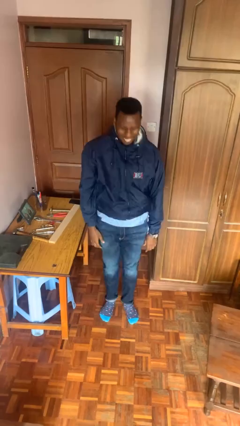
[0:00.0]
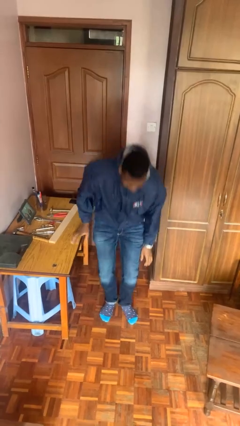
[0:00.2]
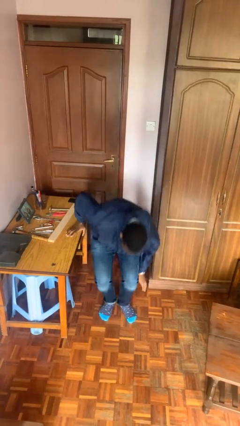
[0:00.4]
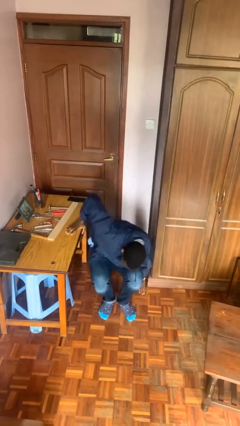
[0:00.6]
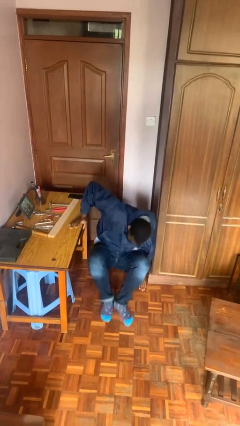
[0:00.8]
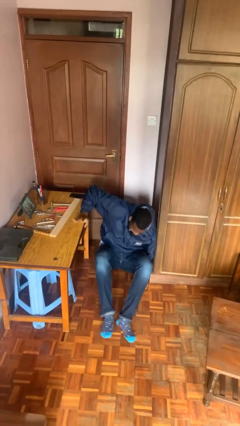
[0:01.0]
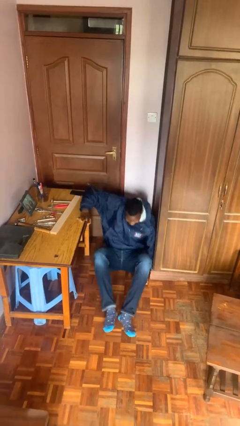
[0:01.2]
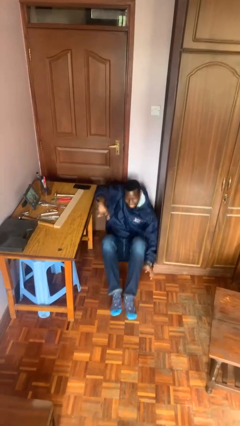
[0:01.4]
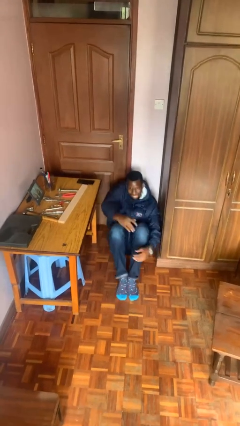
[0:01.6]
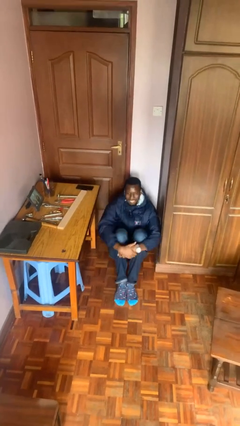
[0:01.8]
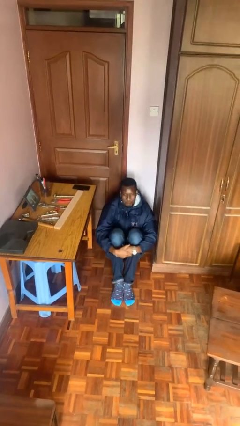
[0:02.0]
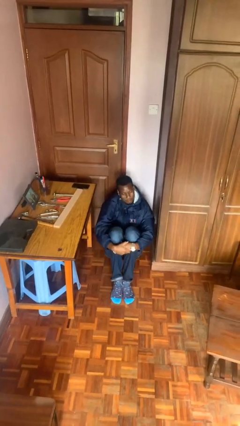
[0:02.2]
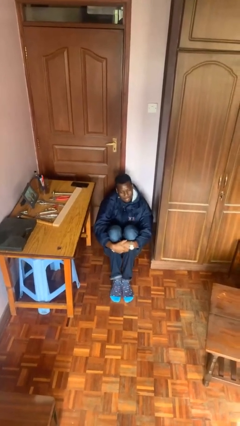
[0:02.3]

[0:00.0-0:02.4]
person sits down

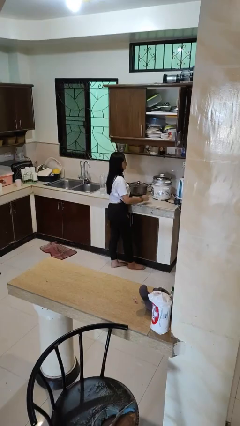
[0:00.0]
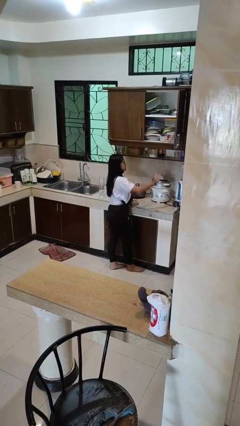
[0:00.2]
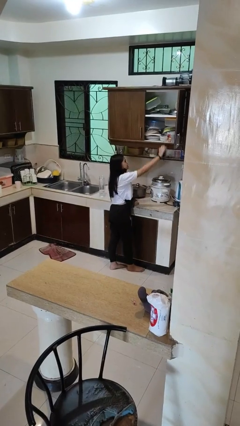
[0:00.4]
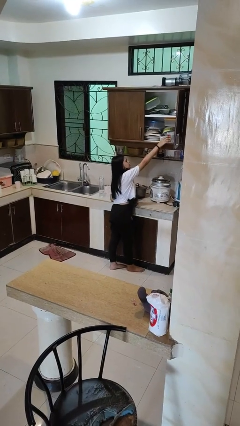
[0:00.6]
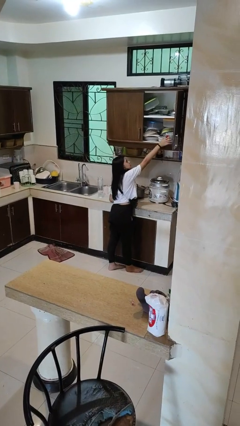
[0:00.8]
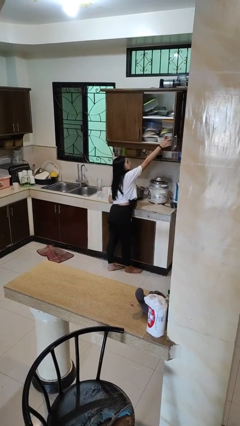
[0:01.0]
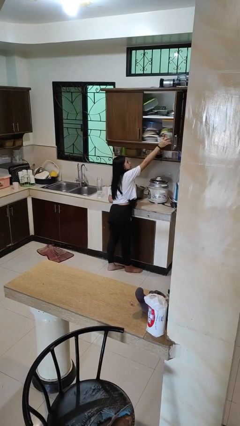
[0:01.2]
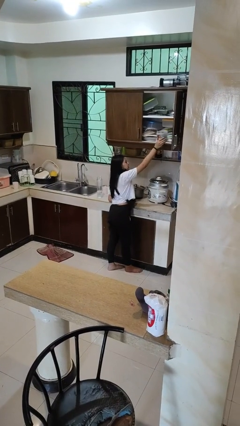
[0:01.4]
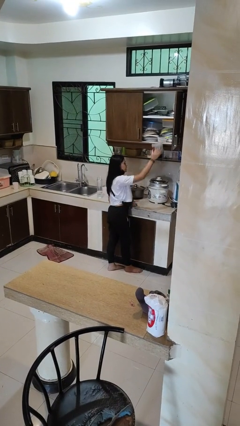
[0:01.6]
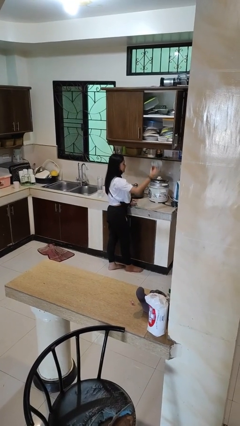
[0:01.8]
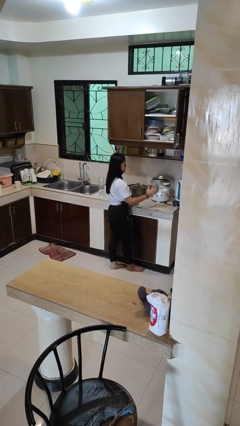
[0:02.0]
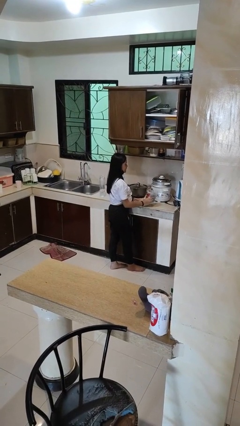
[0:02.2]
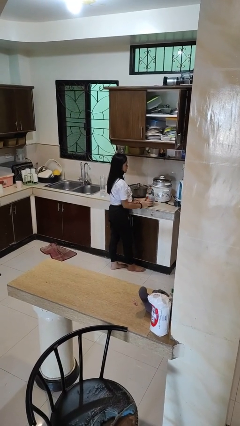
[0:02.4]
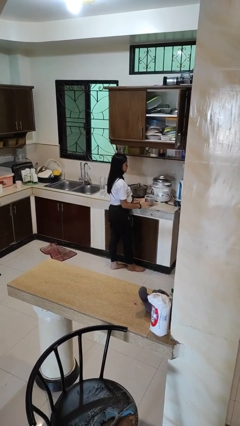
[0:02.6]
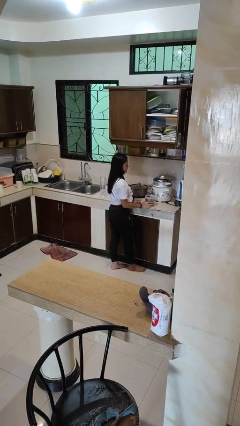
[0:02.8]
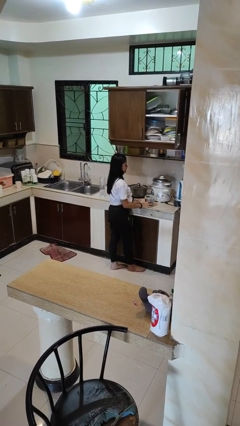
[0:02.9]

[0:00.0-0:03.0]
person picks up object from shelf

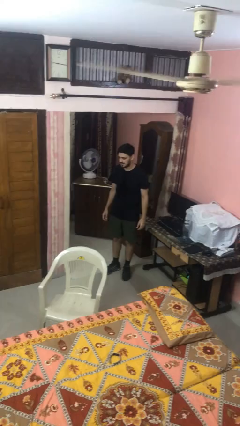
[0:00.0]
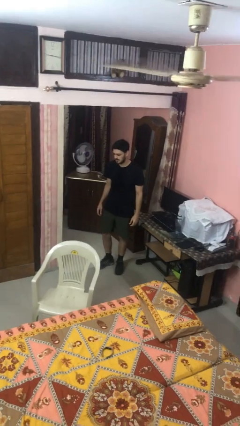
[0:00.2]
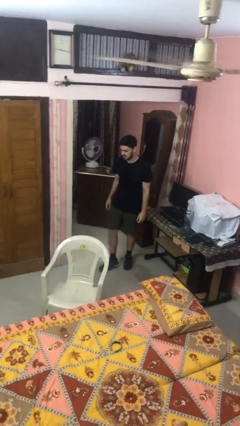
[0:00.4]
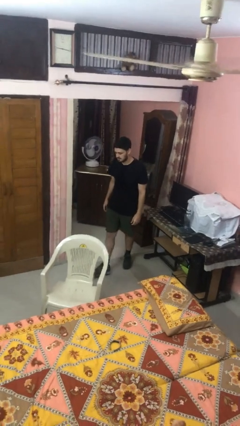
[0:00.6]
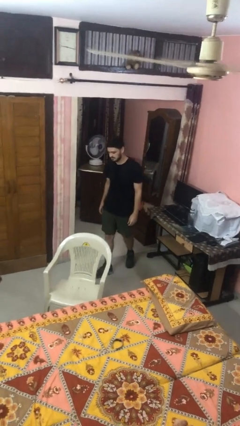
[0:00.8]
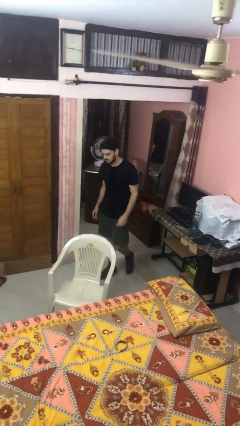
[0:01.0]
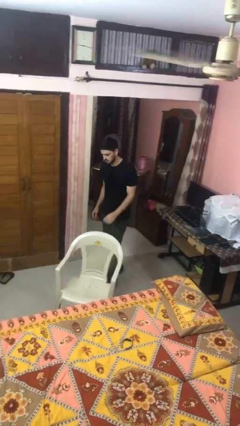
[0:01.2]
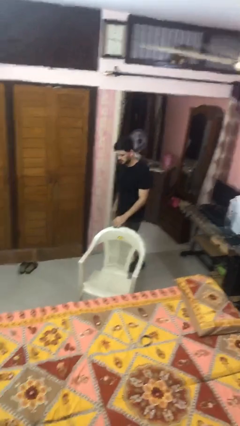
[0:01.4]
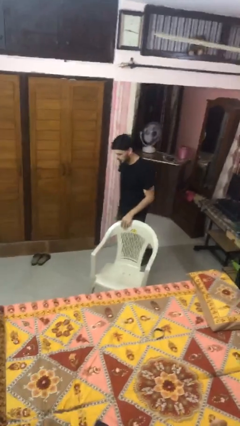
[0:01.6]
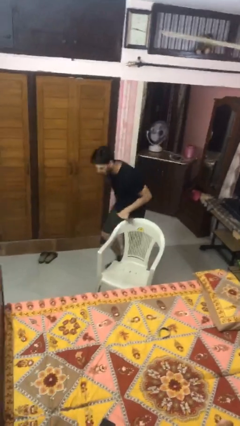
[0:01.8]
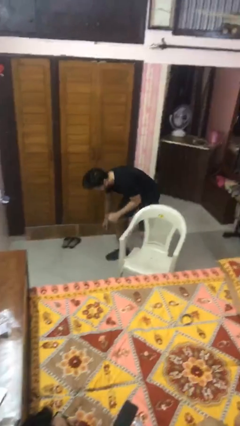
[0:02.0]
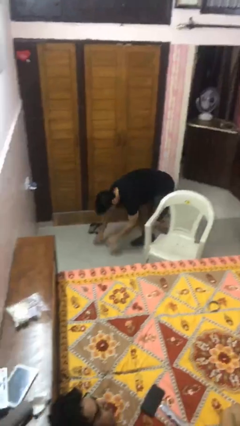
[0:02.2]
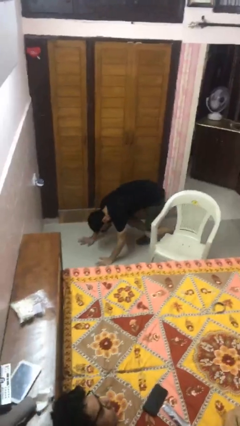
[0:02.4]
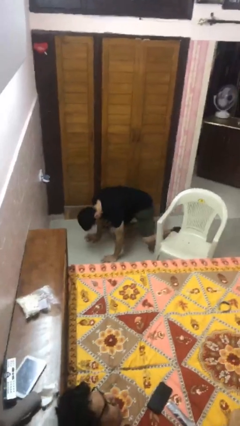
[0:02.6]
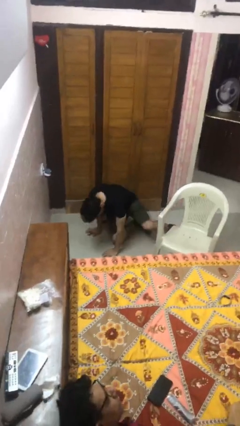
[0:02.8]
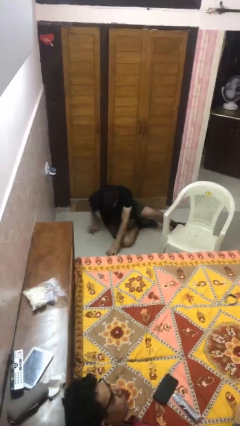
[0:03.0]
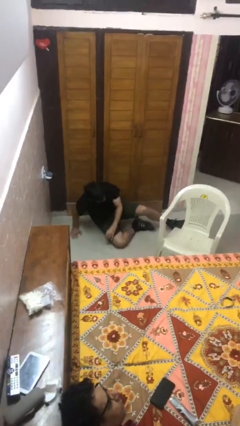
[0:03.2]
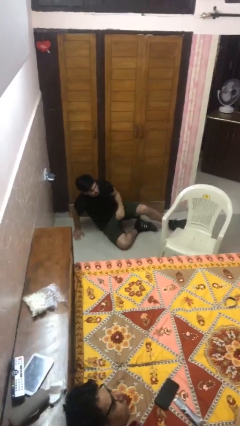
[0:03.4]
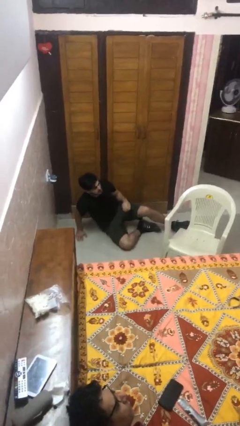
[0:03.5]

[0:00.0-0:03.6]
person trips on object on floor

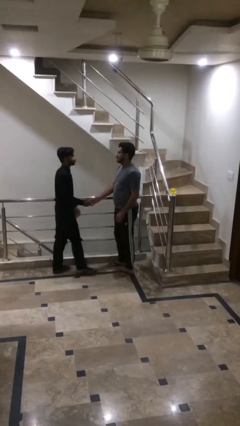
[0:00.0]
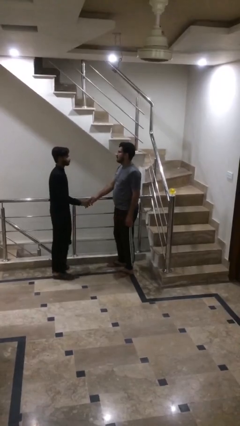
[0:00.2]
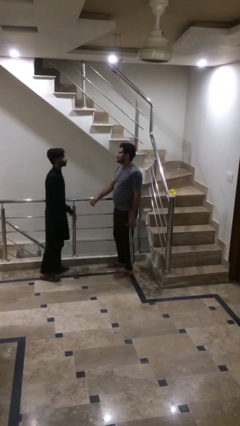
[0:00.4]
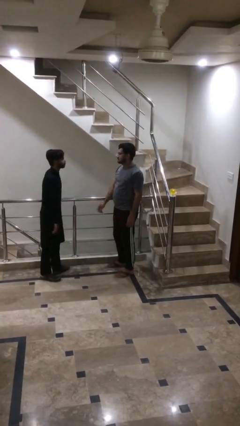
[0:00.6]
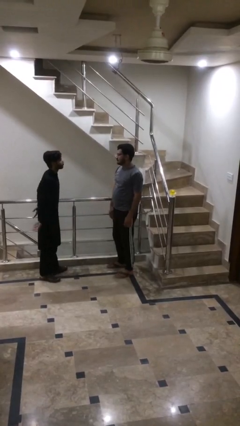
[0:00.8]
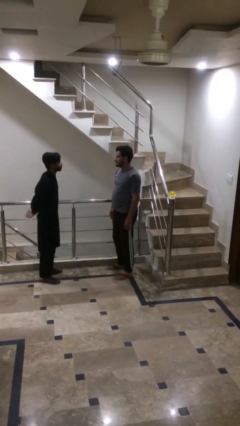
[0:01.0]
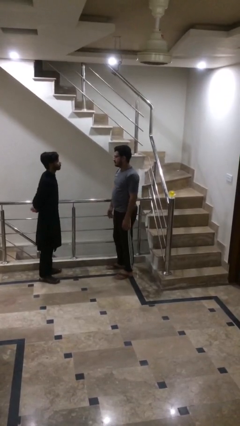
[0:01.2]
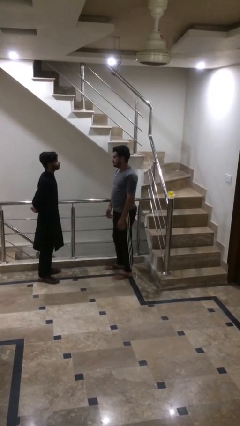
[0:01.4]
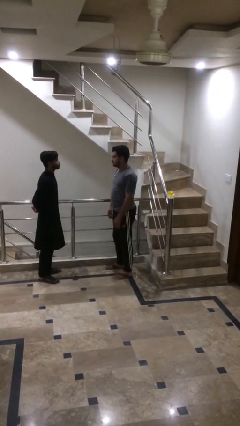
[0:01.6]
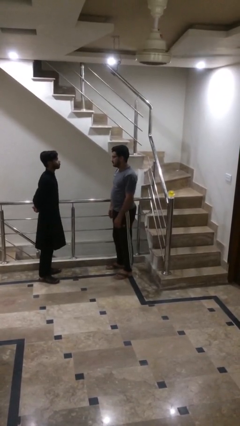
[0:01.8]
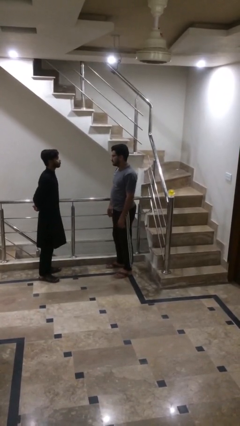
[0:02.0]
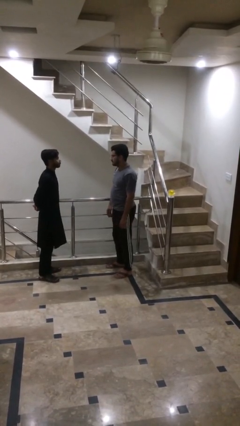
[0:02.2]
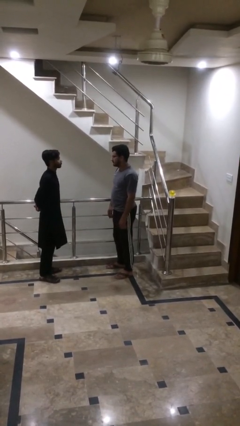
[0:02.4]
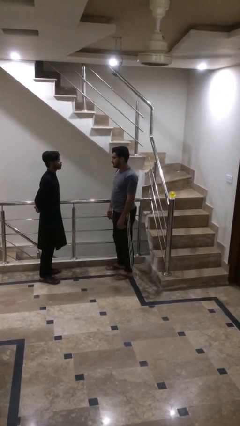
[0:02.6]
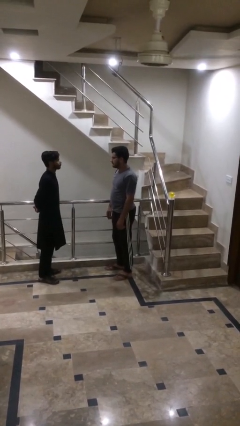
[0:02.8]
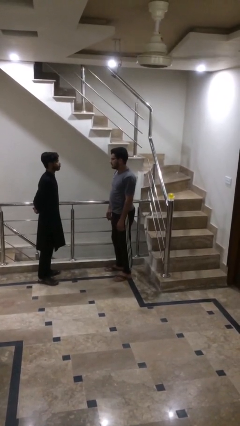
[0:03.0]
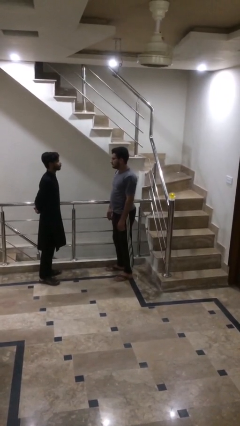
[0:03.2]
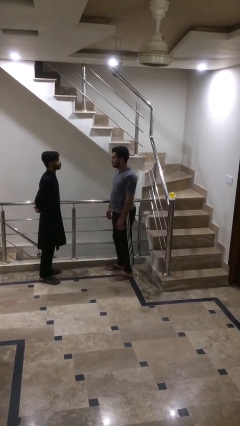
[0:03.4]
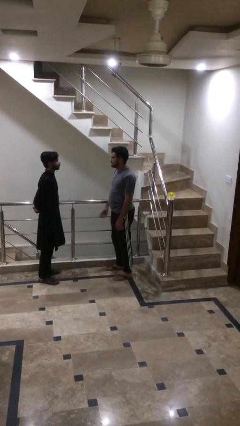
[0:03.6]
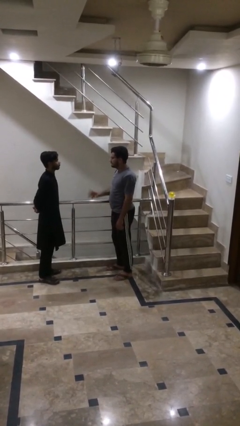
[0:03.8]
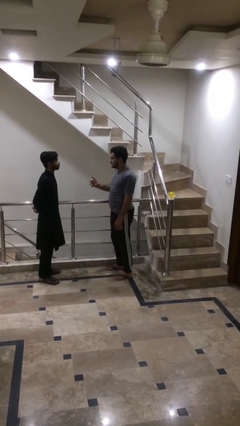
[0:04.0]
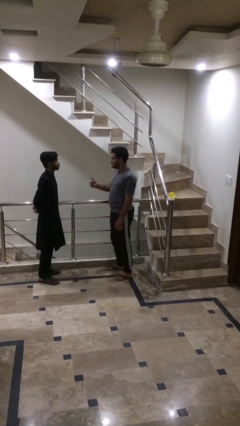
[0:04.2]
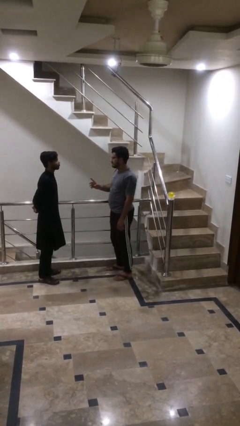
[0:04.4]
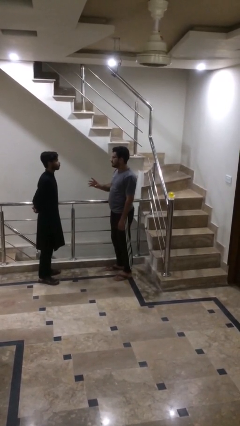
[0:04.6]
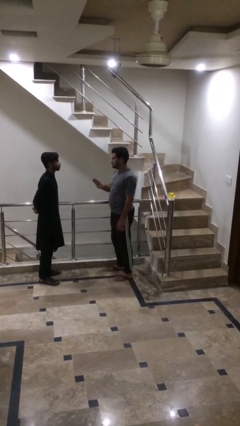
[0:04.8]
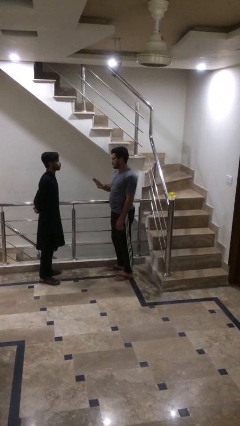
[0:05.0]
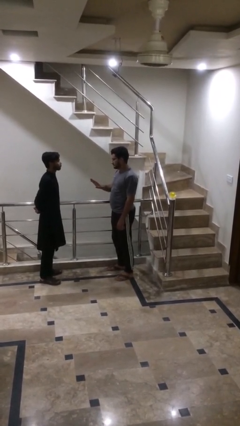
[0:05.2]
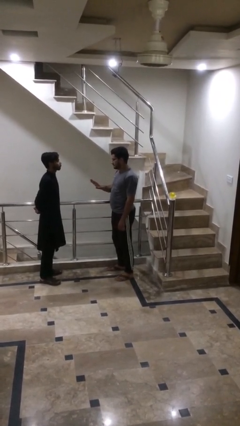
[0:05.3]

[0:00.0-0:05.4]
person talks to person

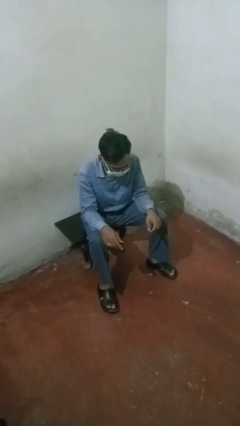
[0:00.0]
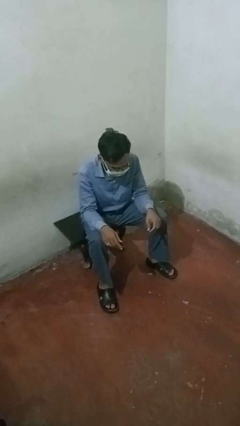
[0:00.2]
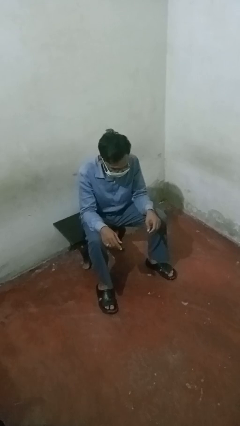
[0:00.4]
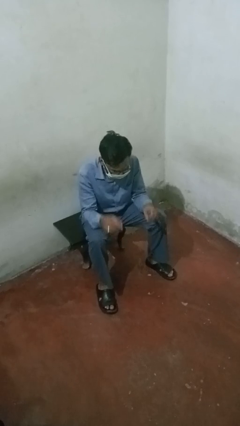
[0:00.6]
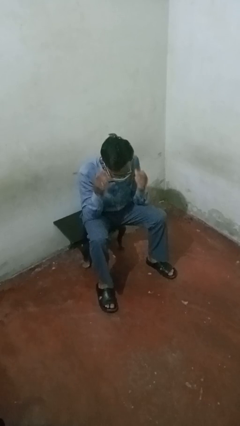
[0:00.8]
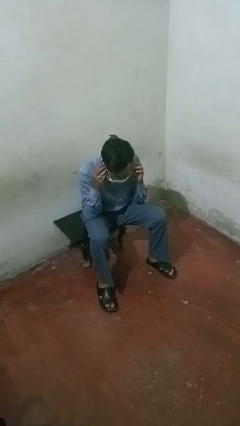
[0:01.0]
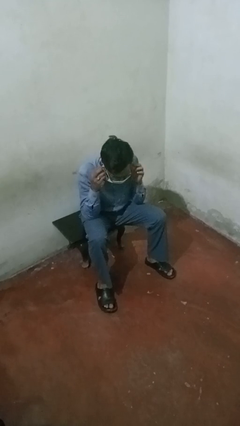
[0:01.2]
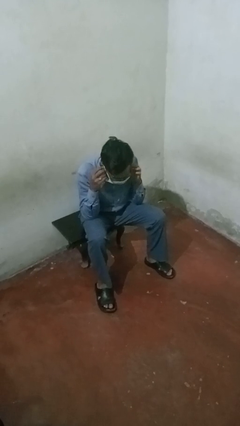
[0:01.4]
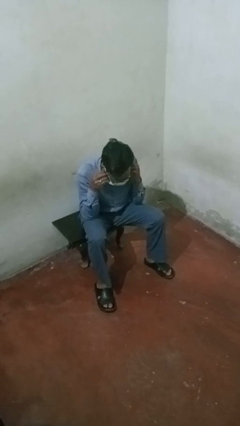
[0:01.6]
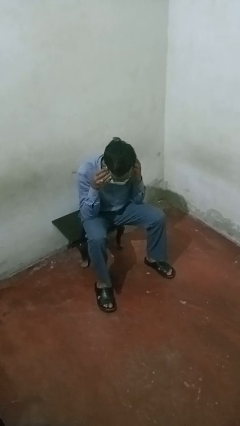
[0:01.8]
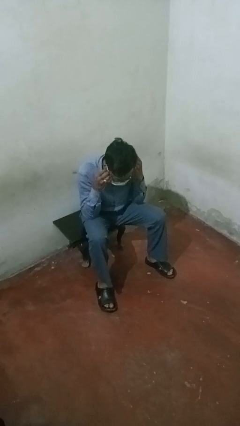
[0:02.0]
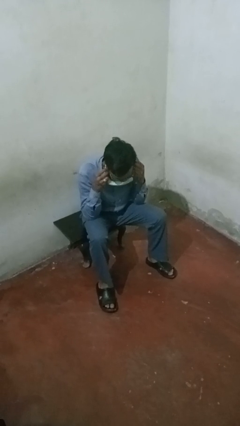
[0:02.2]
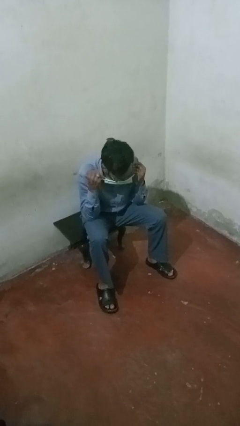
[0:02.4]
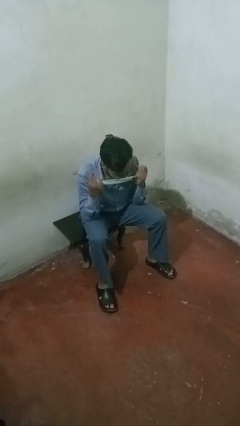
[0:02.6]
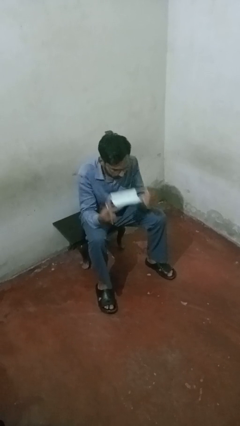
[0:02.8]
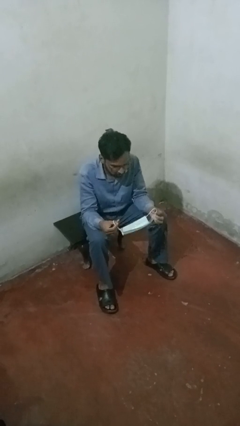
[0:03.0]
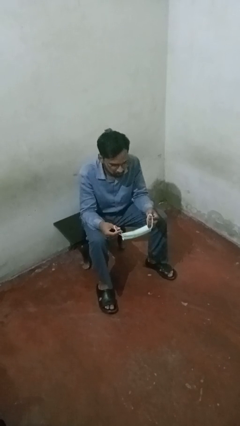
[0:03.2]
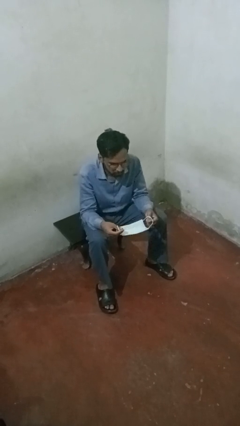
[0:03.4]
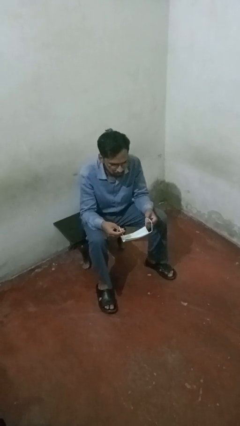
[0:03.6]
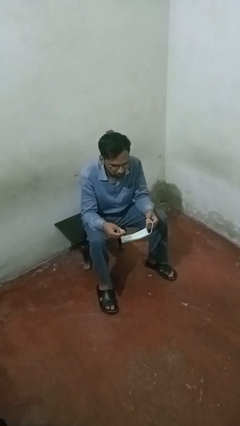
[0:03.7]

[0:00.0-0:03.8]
person takes off facemask
